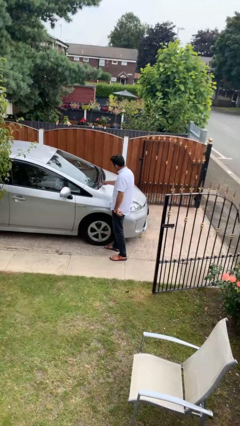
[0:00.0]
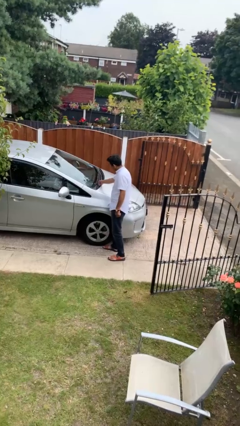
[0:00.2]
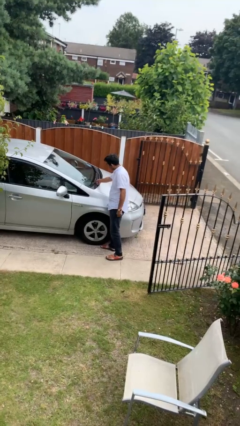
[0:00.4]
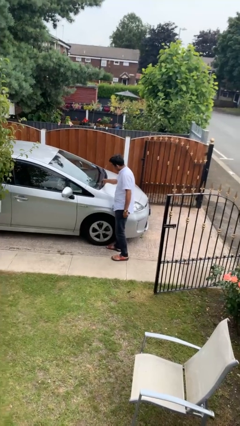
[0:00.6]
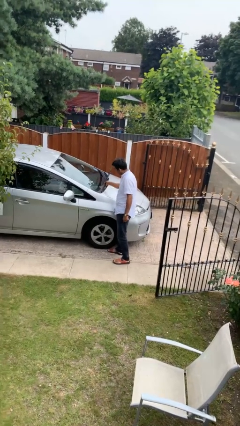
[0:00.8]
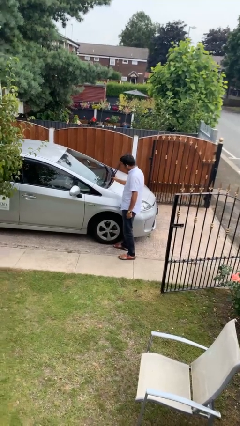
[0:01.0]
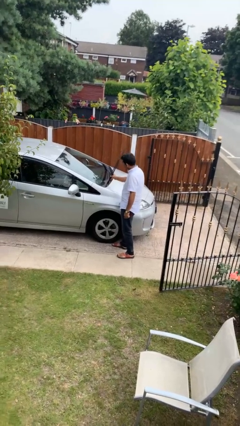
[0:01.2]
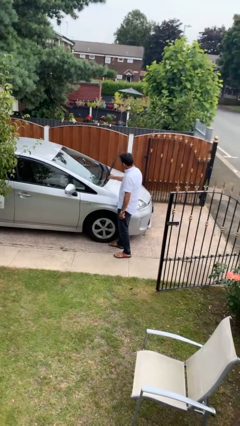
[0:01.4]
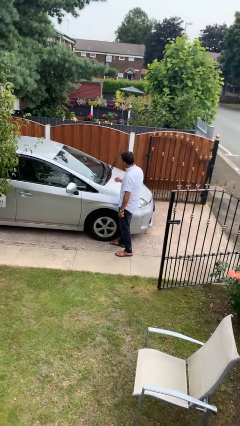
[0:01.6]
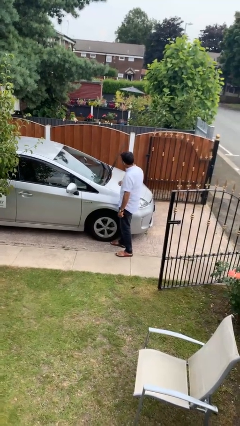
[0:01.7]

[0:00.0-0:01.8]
person flips up car wipers

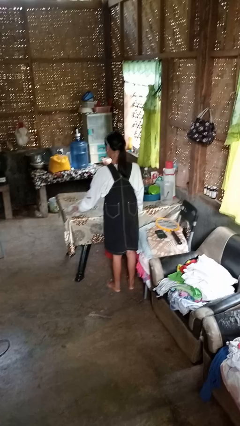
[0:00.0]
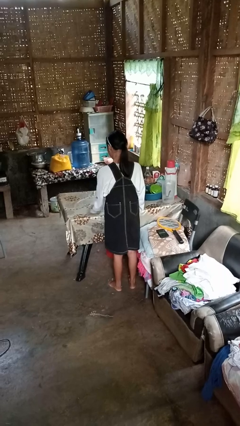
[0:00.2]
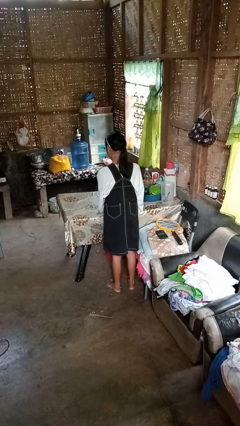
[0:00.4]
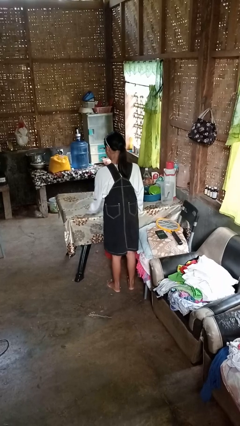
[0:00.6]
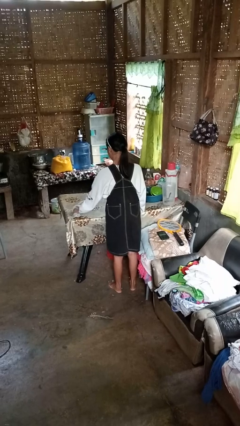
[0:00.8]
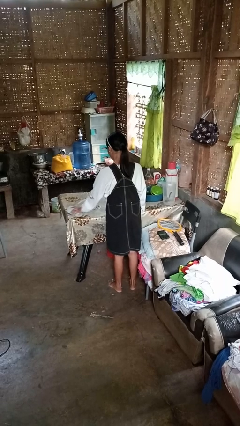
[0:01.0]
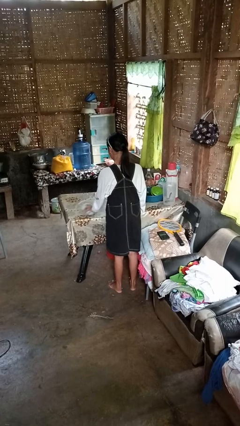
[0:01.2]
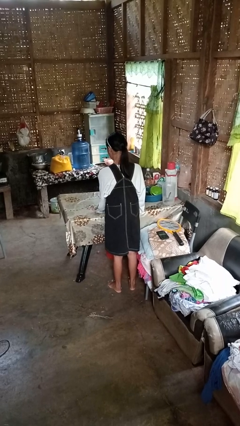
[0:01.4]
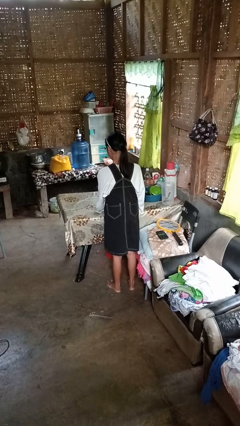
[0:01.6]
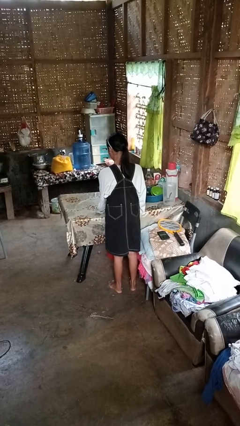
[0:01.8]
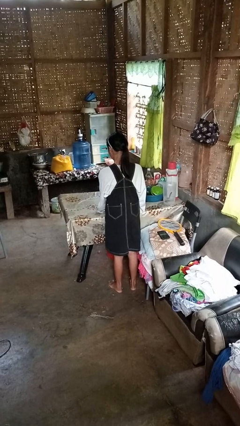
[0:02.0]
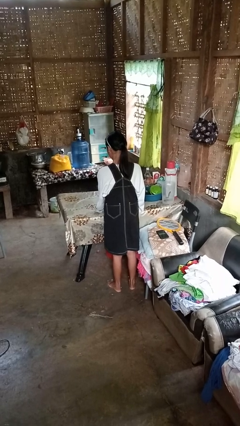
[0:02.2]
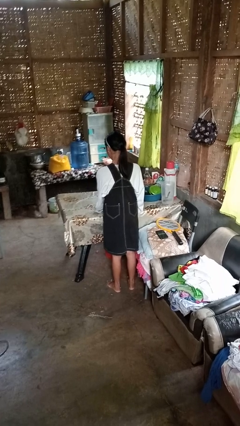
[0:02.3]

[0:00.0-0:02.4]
person cleans table with rag

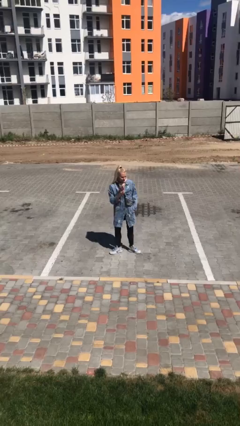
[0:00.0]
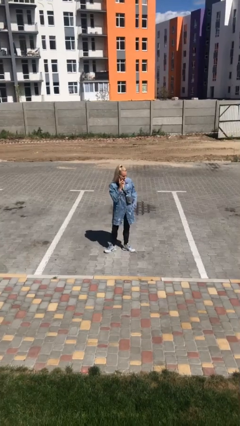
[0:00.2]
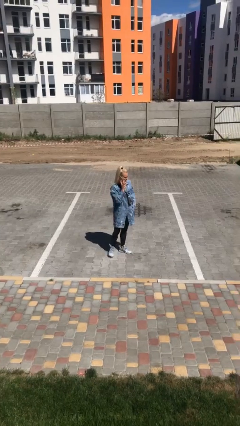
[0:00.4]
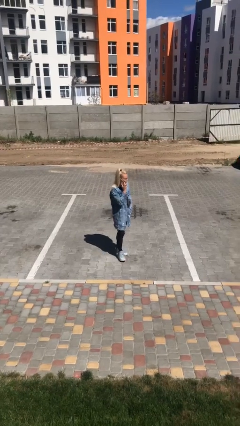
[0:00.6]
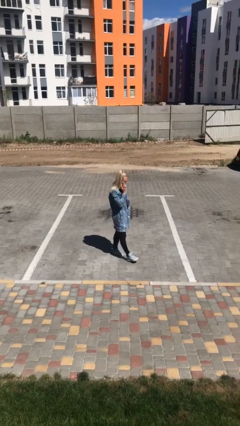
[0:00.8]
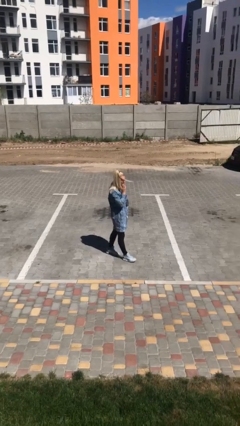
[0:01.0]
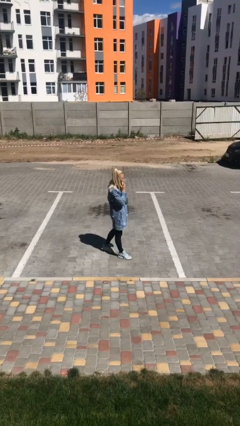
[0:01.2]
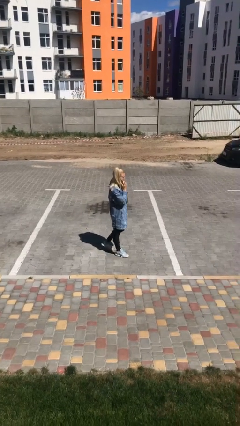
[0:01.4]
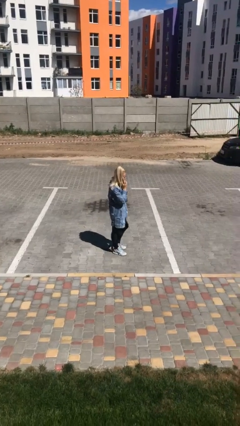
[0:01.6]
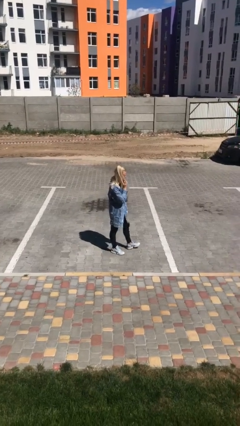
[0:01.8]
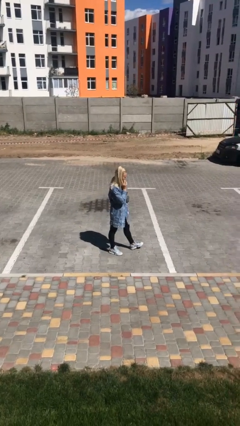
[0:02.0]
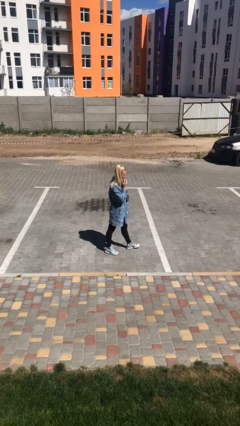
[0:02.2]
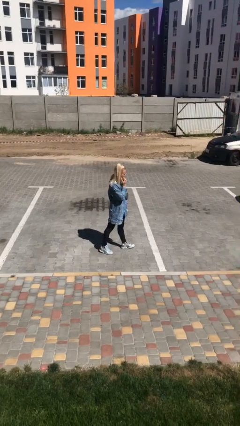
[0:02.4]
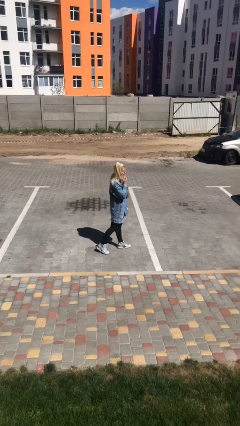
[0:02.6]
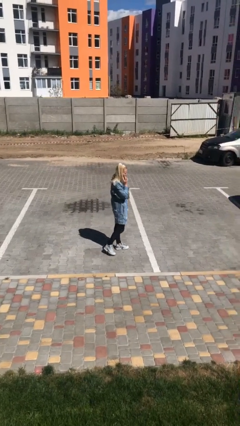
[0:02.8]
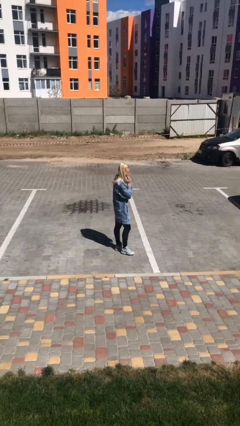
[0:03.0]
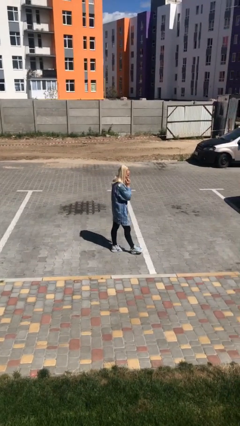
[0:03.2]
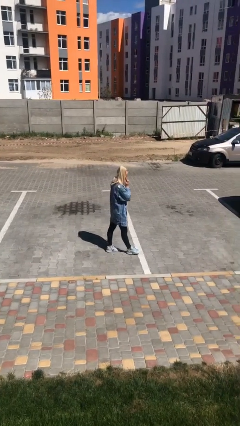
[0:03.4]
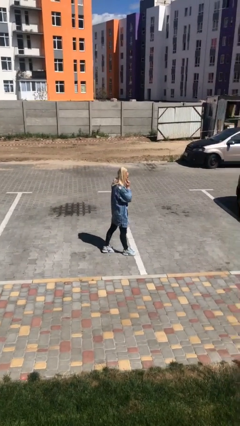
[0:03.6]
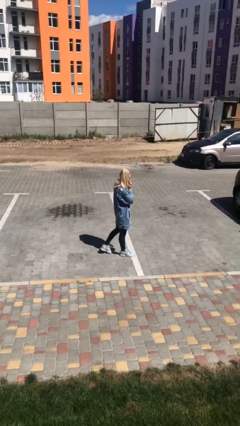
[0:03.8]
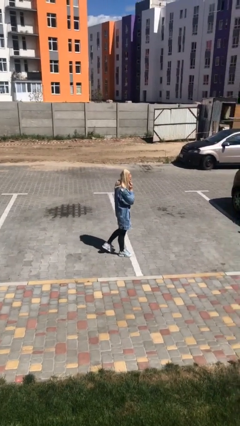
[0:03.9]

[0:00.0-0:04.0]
person talks on phone

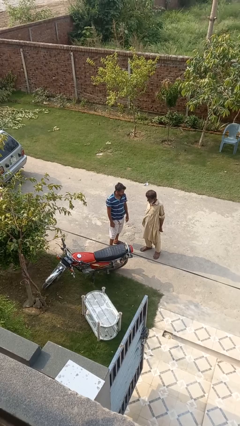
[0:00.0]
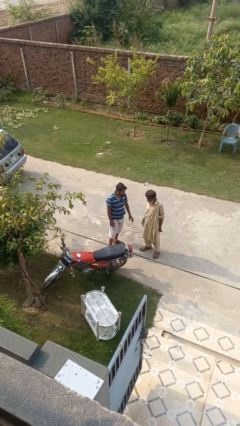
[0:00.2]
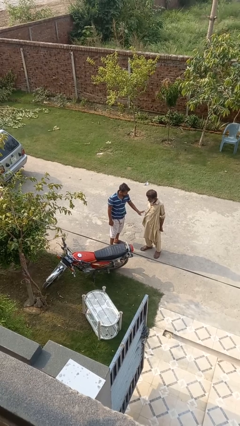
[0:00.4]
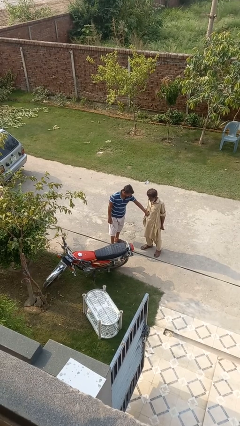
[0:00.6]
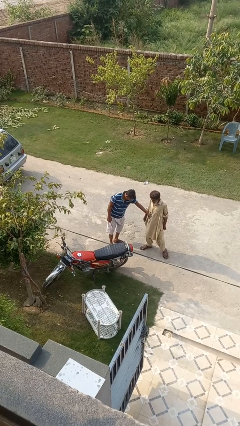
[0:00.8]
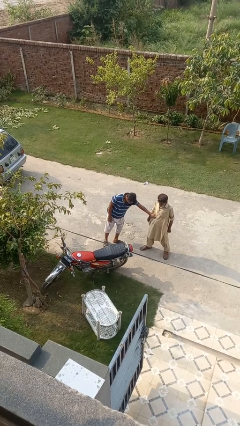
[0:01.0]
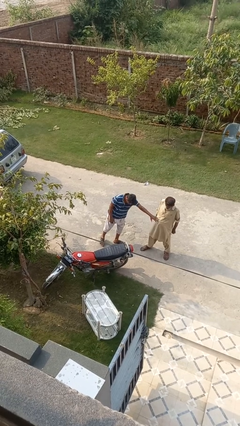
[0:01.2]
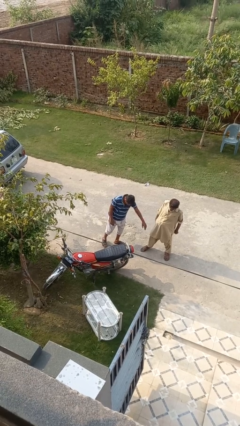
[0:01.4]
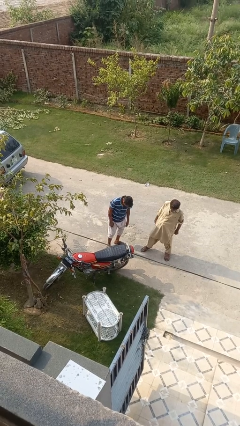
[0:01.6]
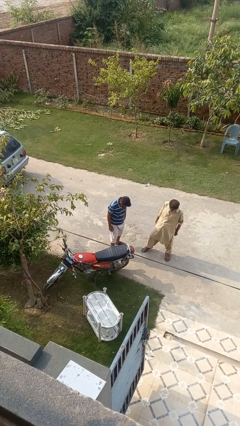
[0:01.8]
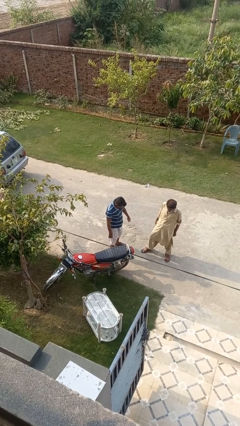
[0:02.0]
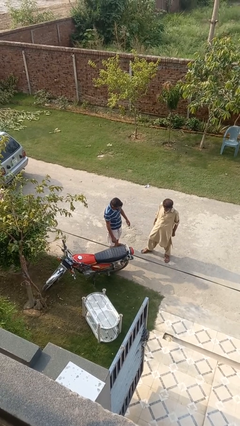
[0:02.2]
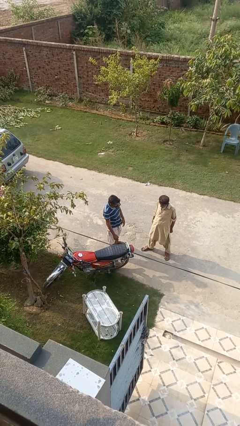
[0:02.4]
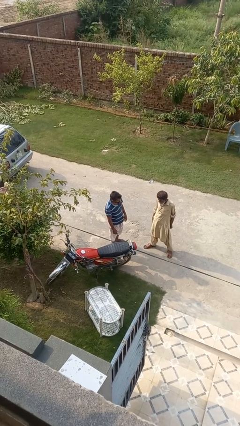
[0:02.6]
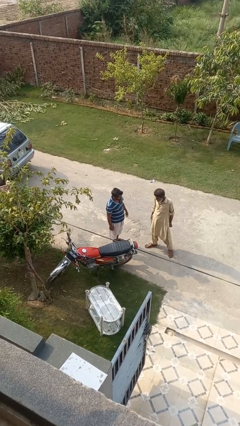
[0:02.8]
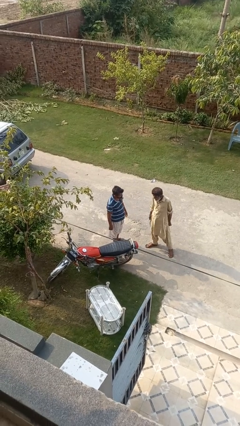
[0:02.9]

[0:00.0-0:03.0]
person shoves person

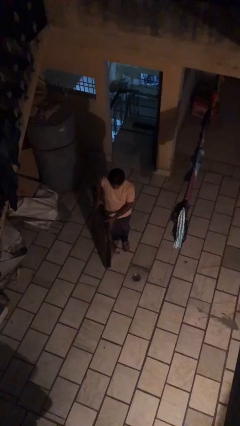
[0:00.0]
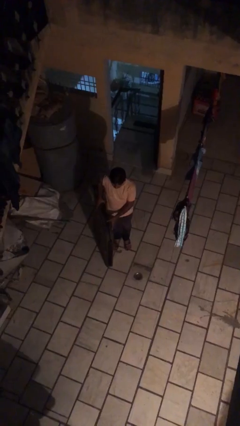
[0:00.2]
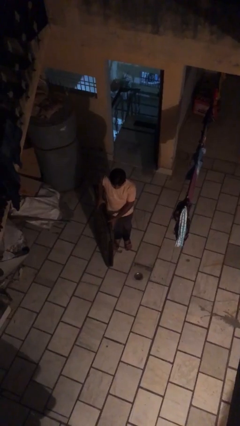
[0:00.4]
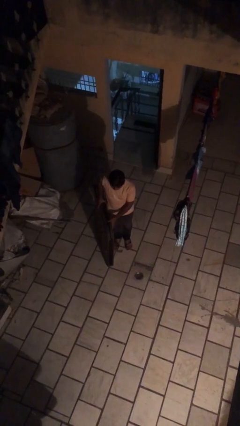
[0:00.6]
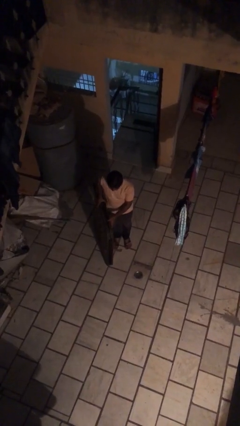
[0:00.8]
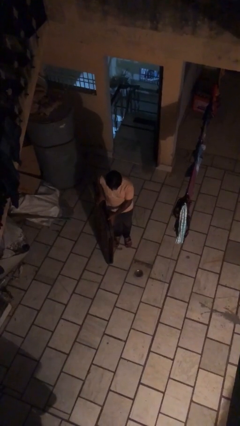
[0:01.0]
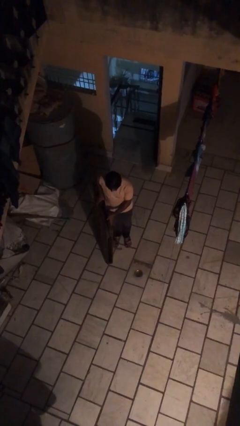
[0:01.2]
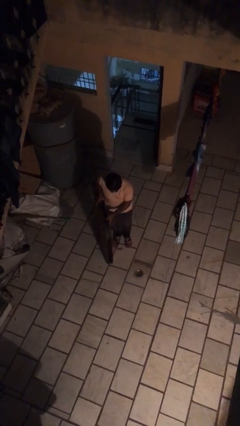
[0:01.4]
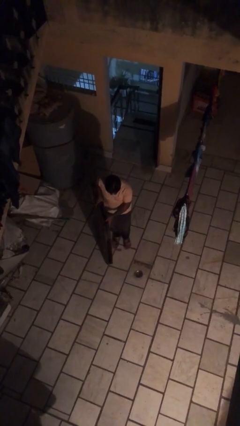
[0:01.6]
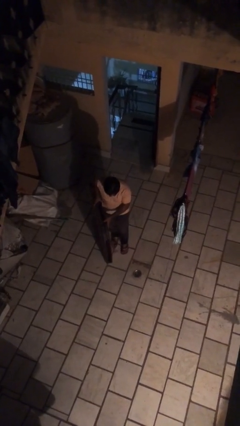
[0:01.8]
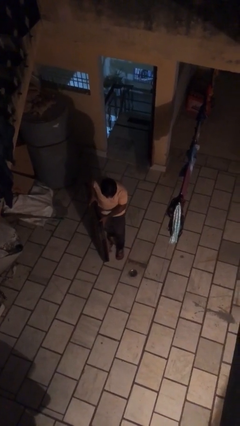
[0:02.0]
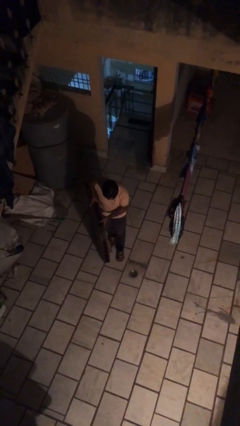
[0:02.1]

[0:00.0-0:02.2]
person picks up object from floor

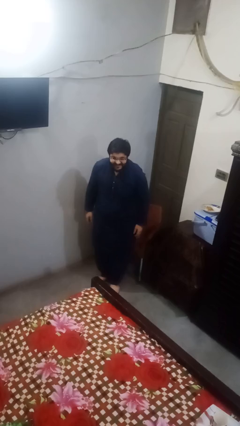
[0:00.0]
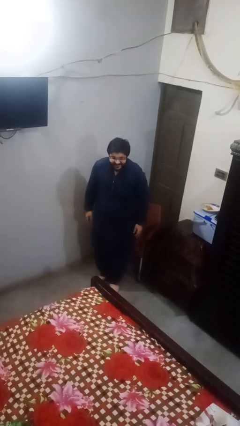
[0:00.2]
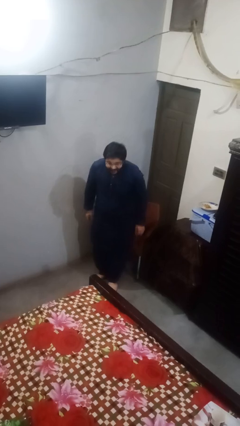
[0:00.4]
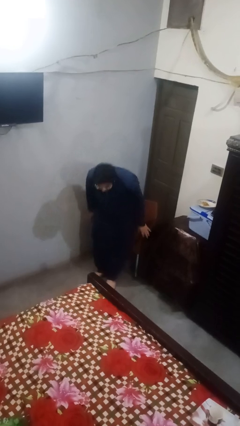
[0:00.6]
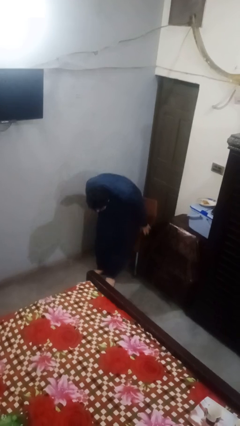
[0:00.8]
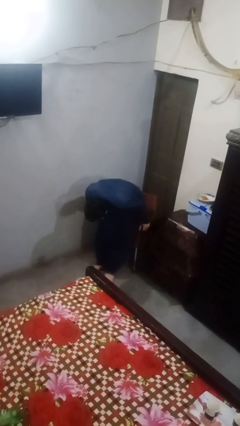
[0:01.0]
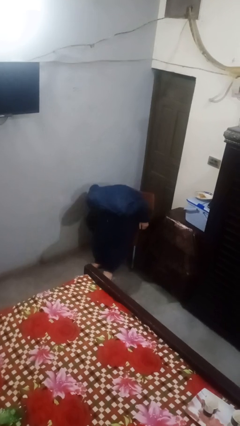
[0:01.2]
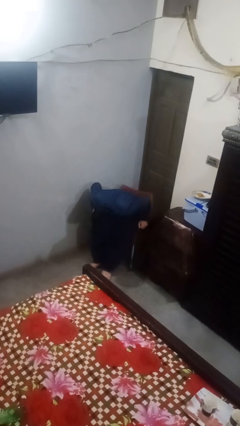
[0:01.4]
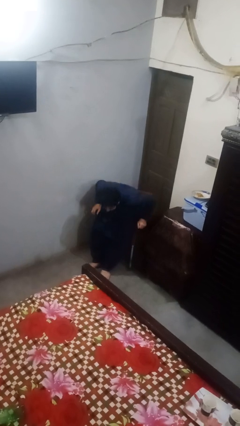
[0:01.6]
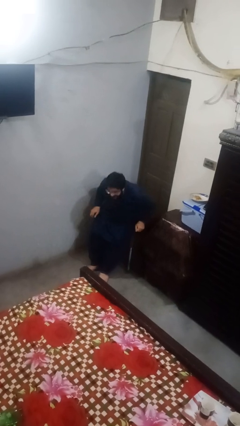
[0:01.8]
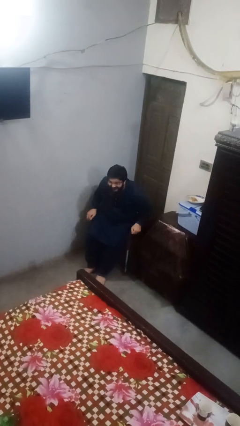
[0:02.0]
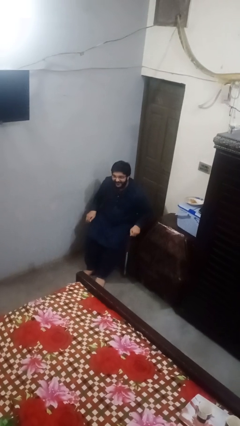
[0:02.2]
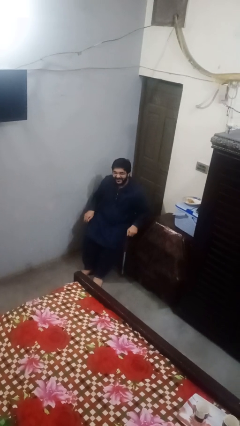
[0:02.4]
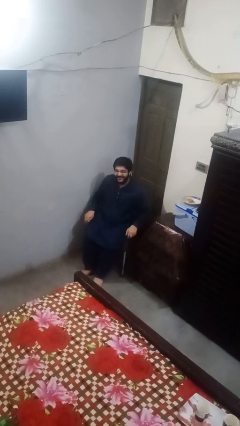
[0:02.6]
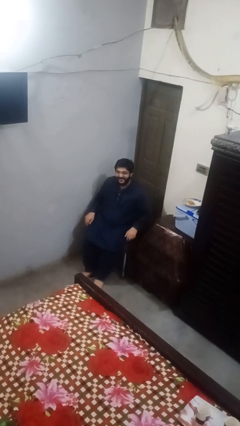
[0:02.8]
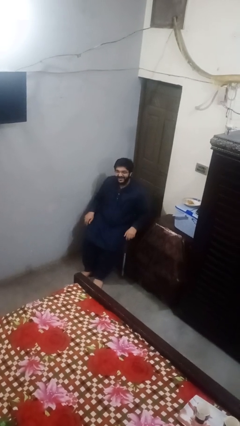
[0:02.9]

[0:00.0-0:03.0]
person sits down

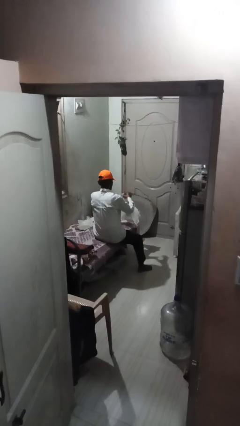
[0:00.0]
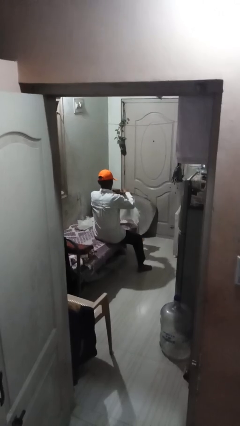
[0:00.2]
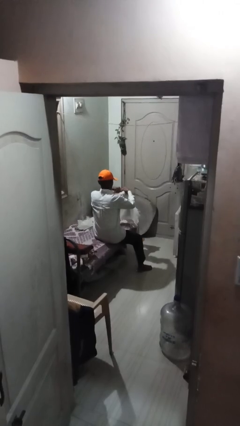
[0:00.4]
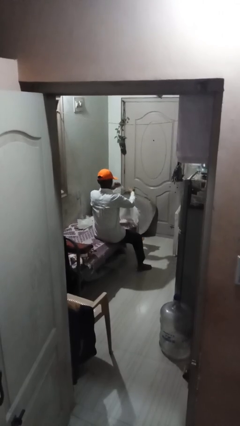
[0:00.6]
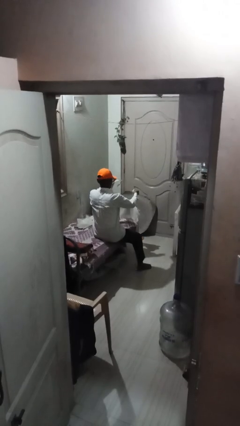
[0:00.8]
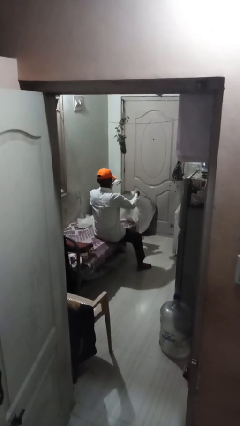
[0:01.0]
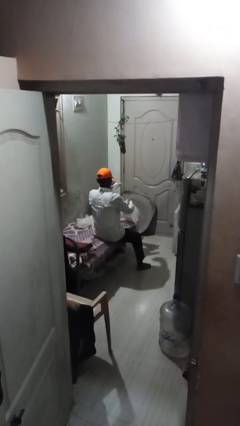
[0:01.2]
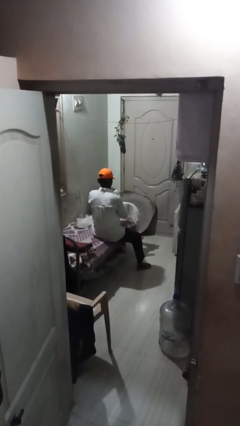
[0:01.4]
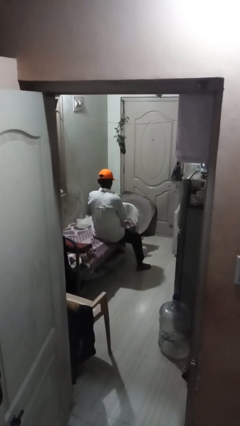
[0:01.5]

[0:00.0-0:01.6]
person tears paper
